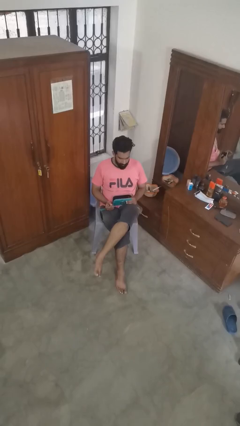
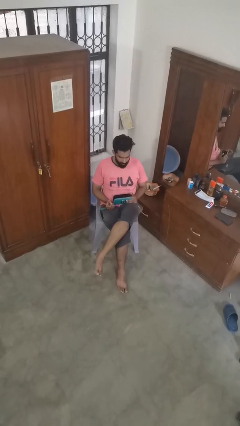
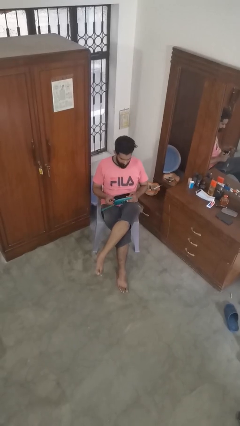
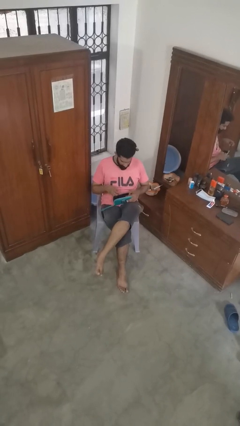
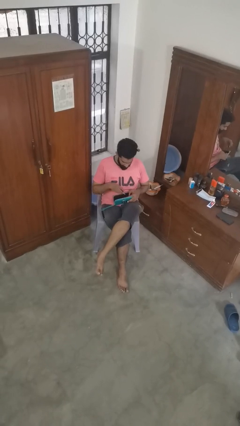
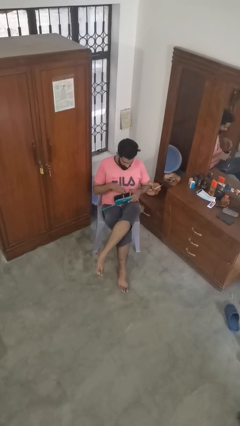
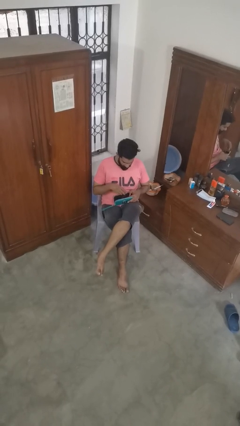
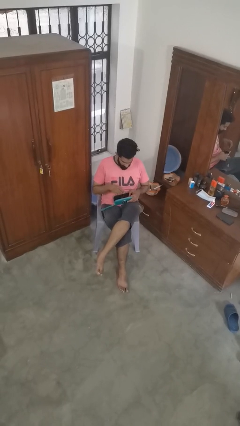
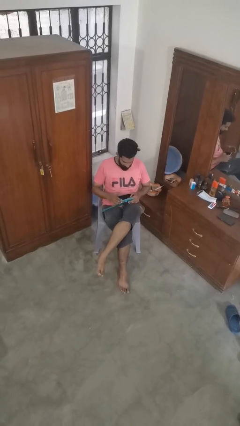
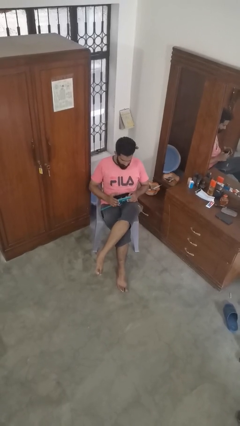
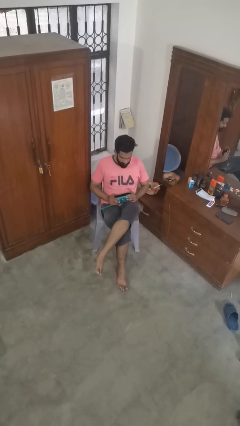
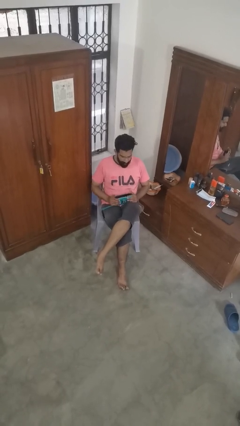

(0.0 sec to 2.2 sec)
person puts object into purse

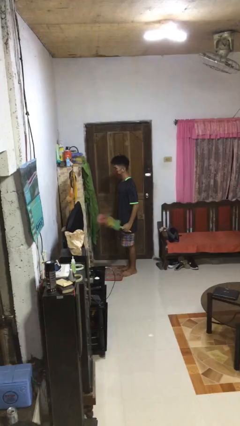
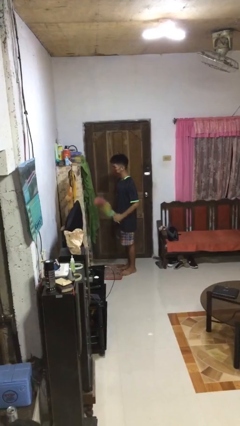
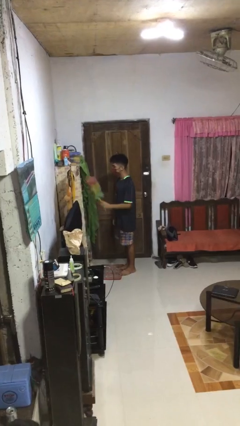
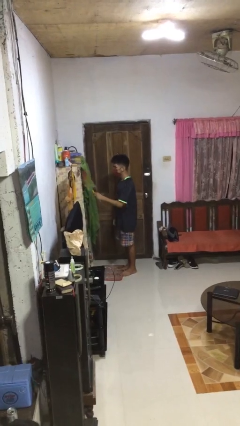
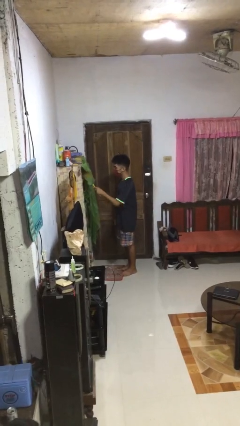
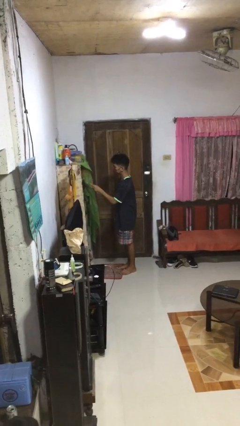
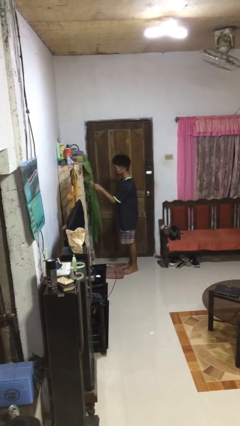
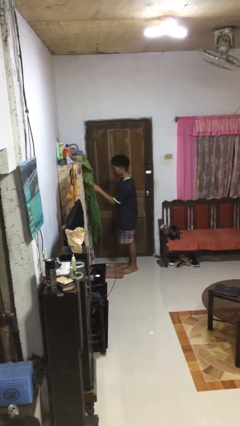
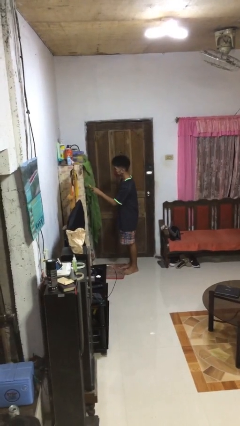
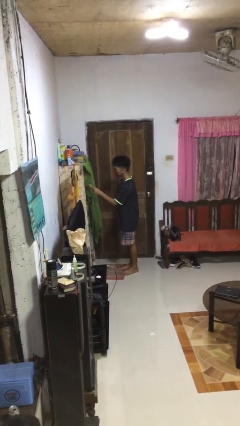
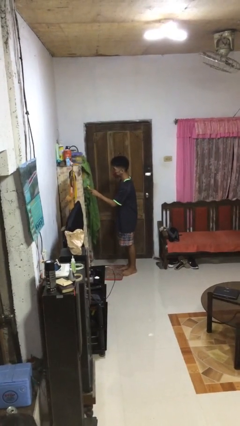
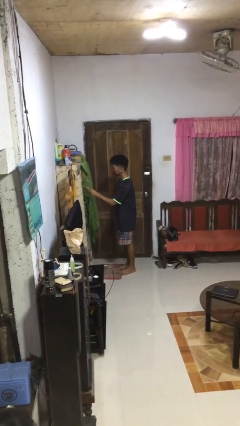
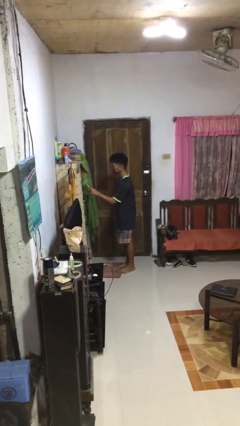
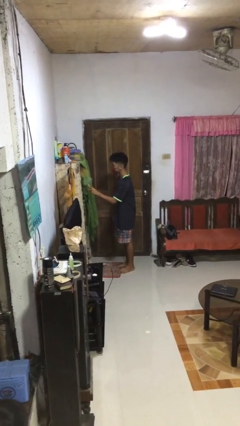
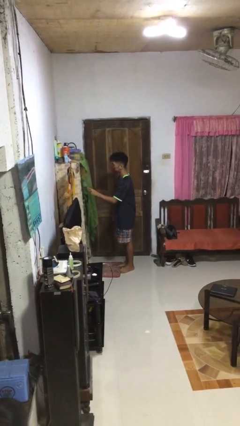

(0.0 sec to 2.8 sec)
person dusts furniture

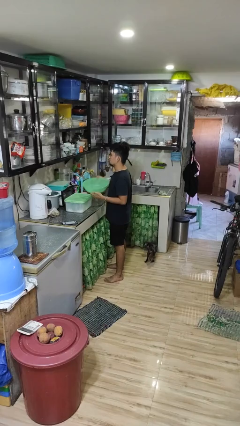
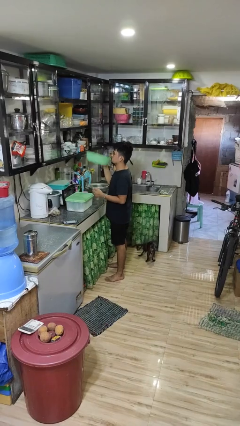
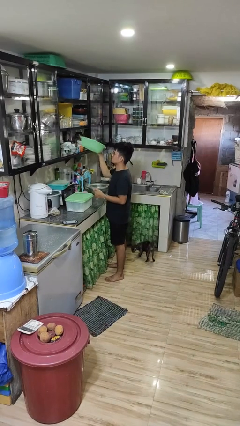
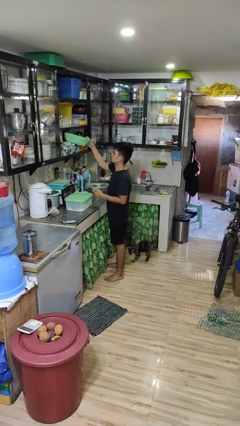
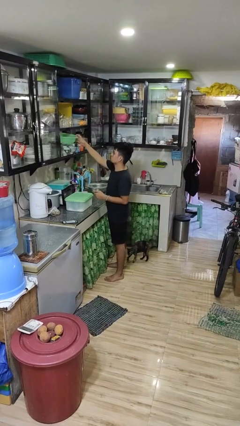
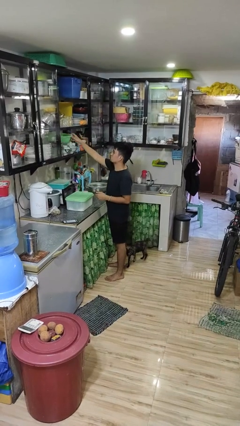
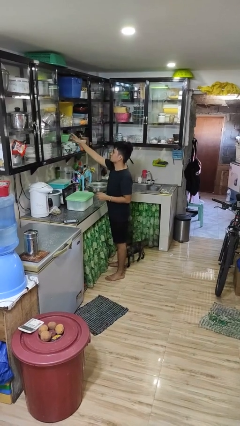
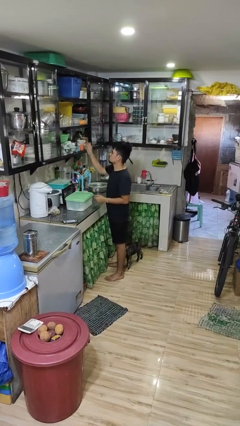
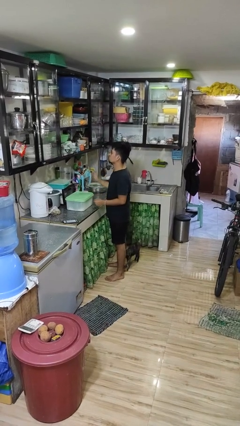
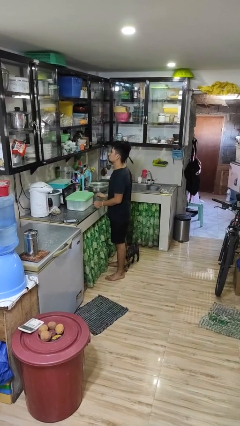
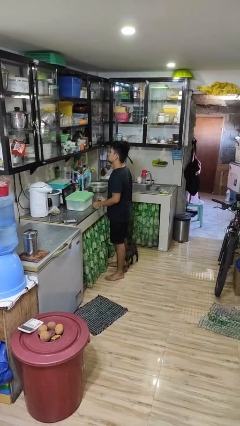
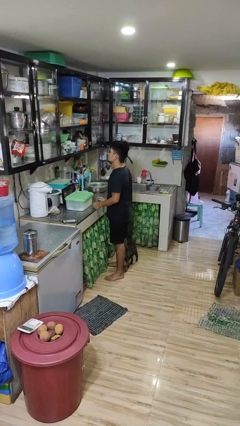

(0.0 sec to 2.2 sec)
person puts down object into cabinet

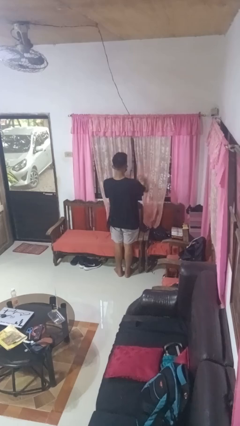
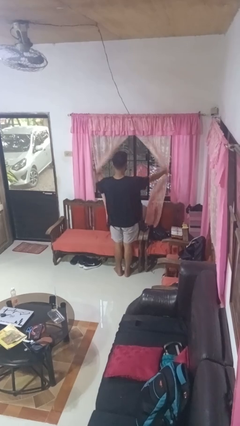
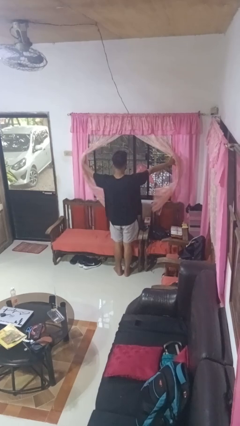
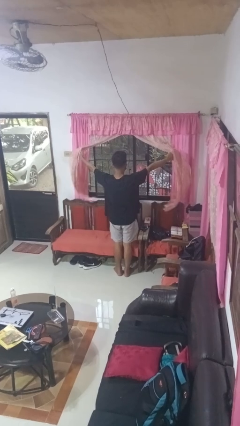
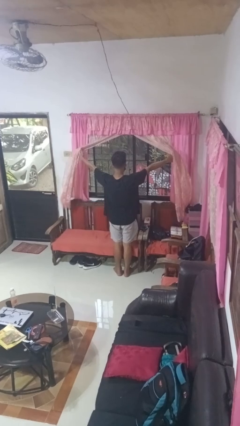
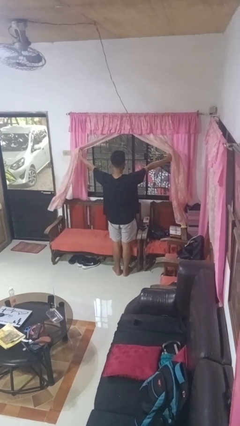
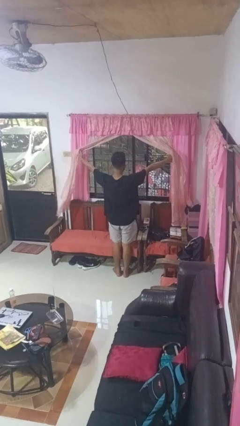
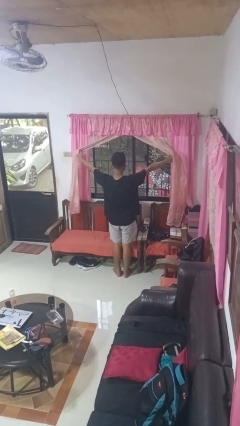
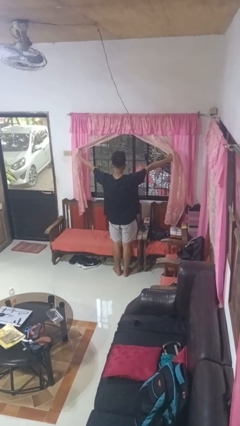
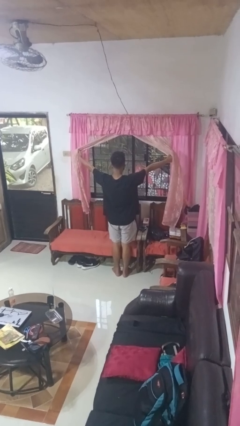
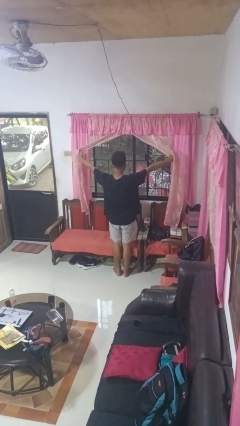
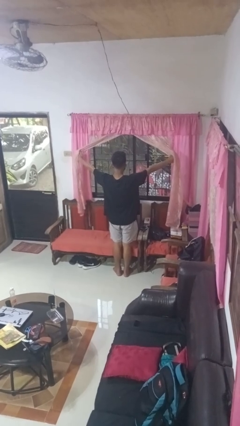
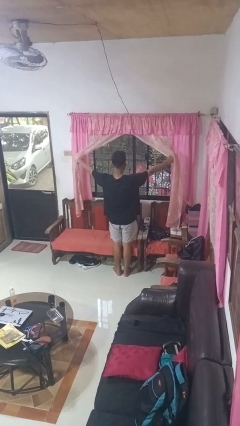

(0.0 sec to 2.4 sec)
person opens curtains

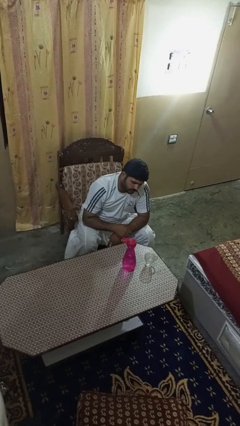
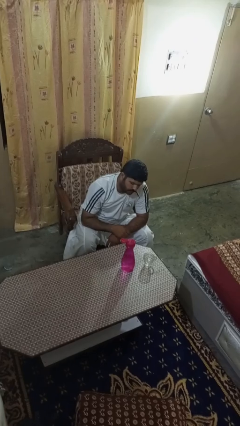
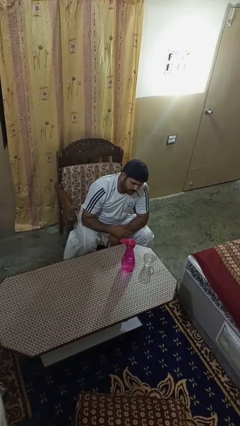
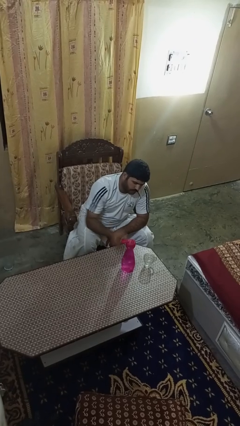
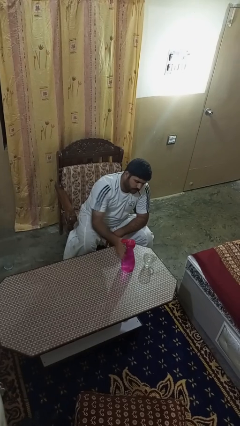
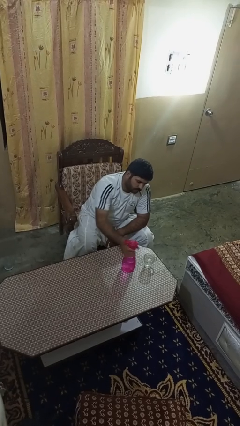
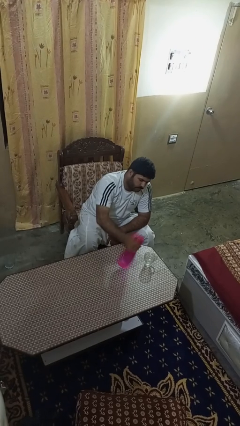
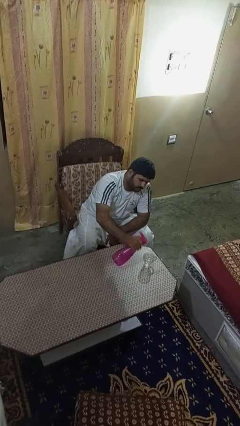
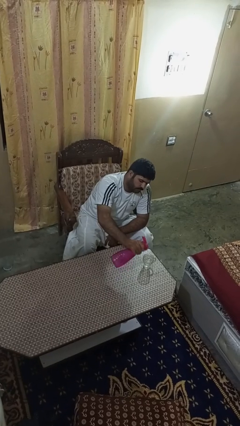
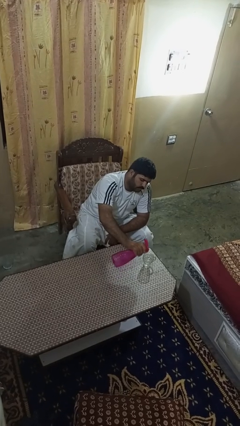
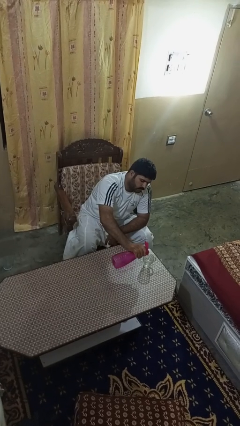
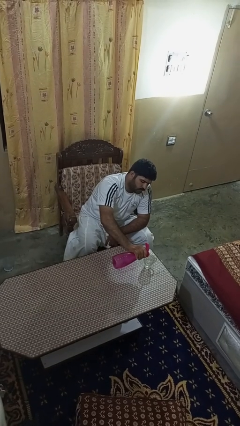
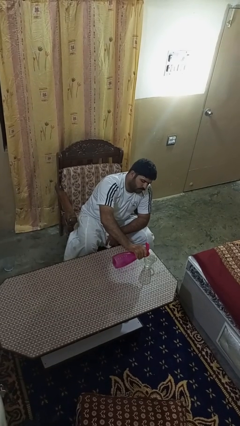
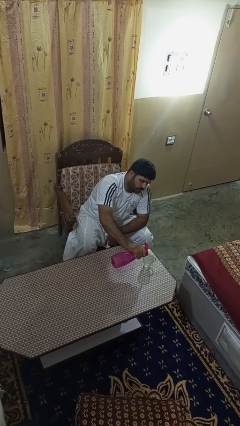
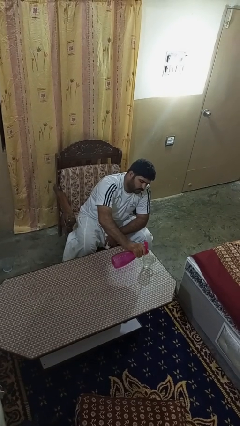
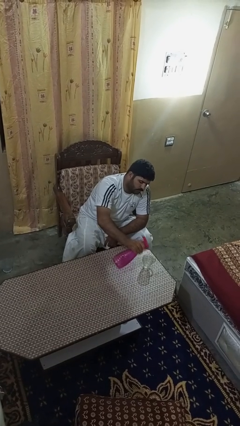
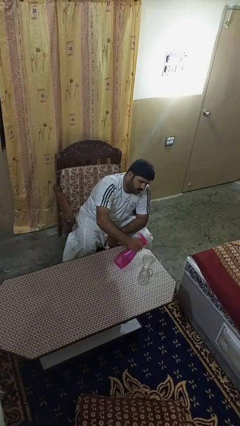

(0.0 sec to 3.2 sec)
person pours liquid into cup

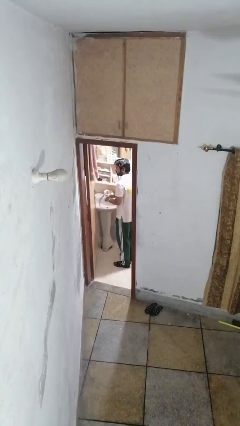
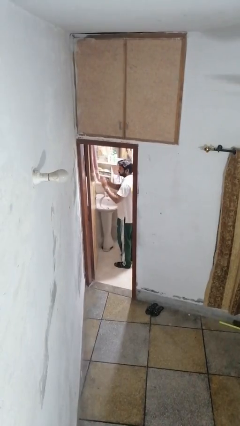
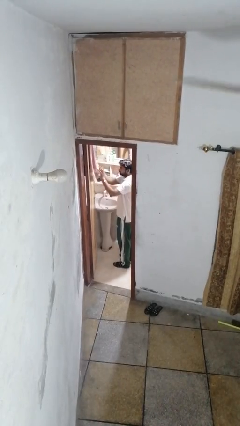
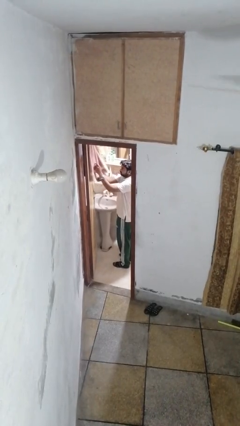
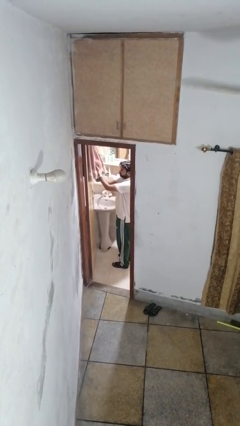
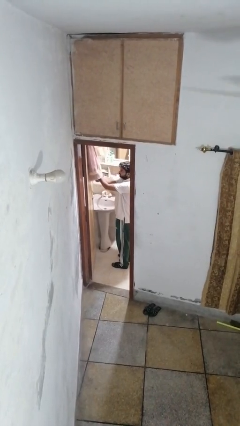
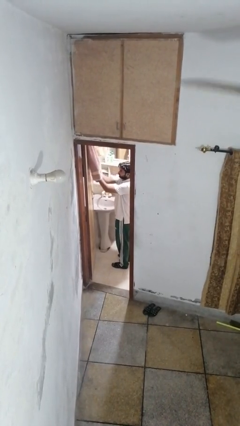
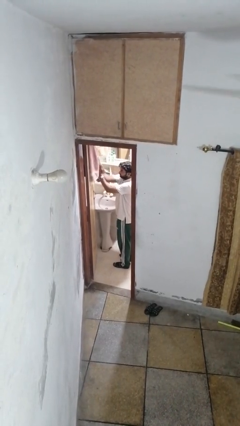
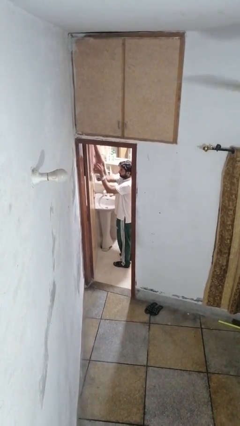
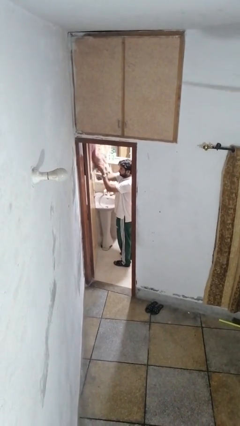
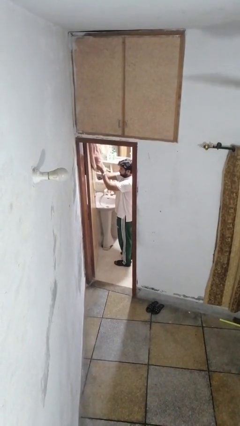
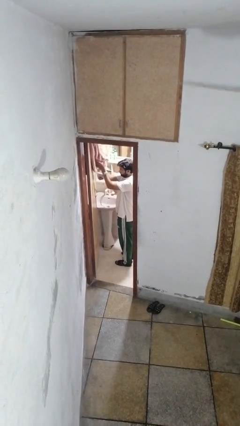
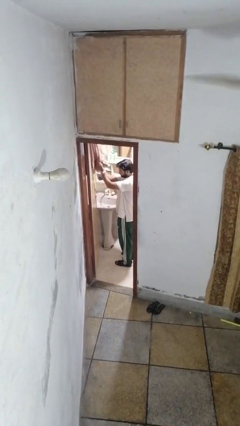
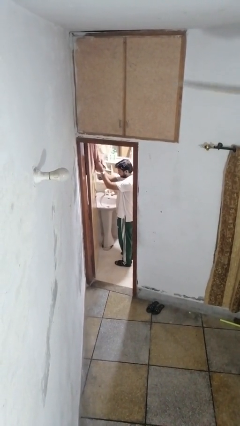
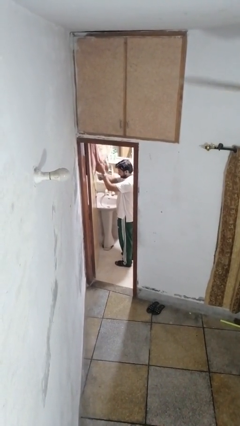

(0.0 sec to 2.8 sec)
person dries hands with towel

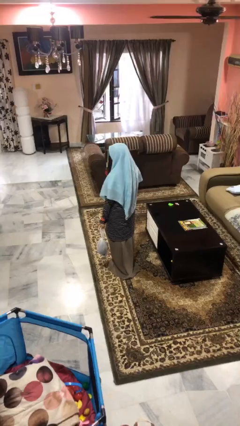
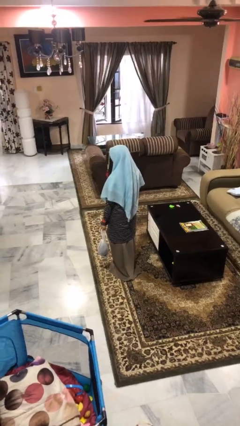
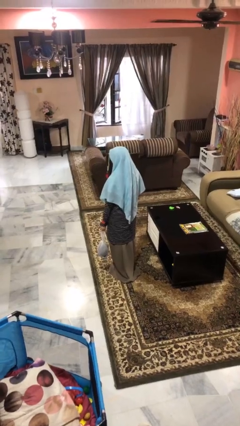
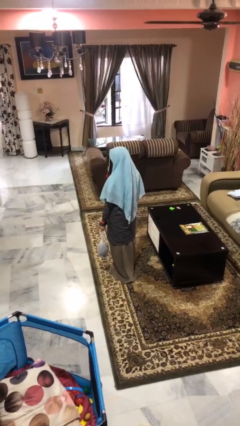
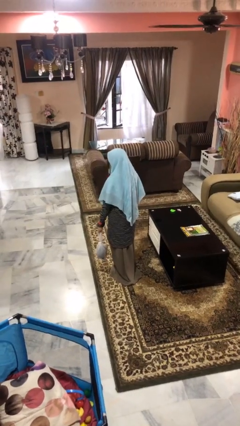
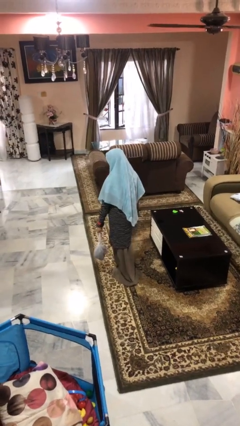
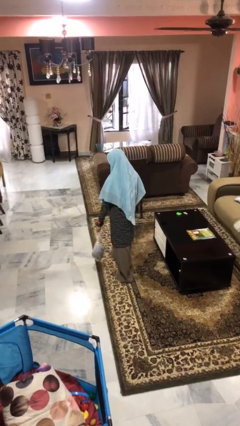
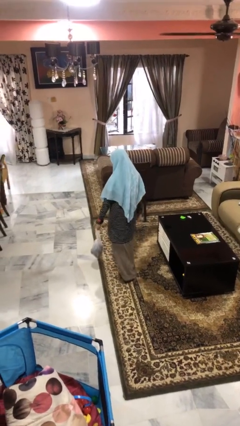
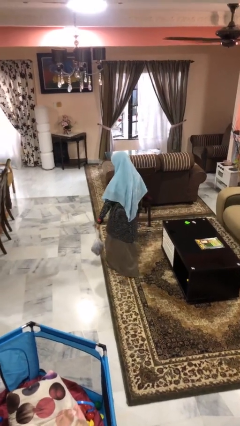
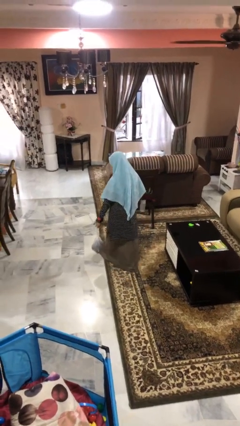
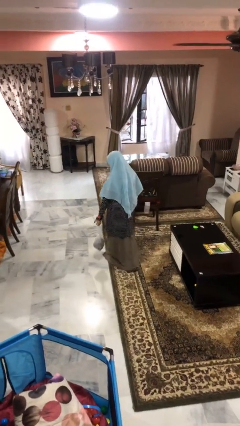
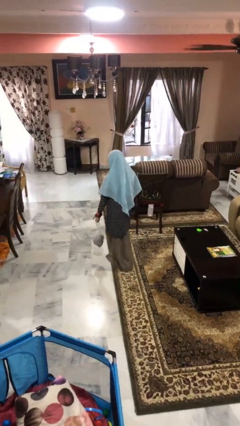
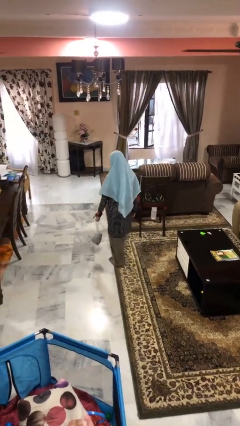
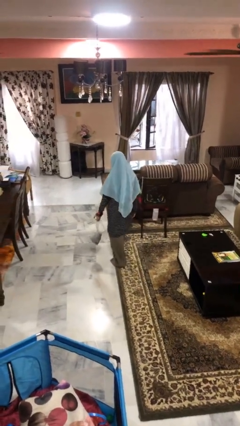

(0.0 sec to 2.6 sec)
person carries groceries
